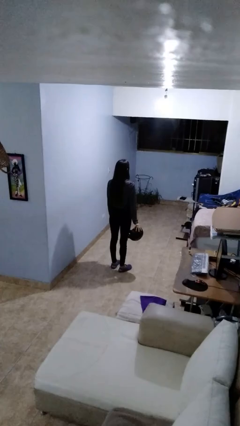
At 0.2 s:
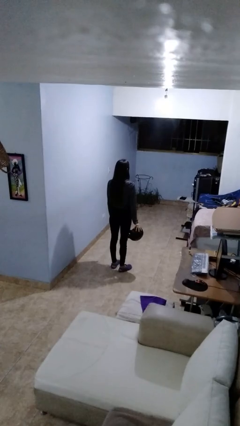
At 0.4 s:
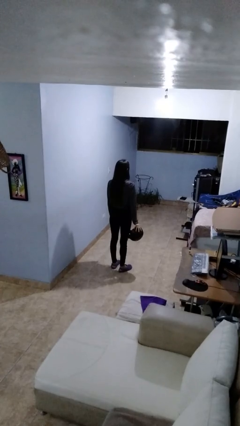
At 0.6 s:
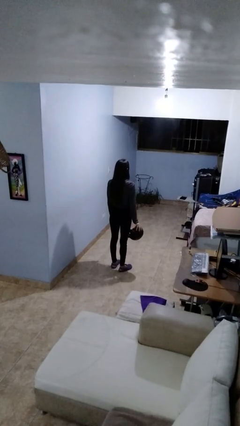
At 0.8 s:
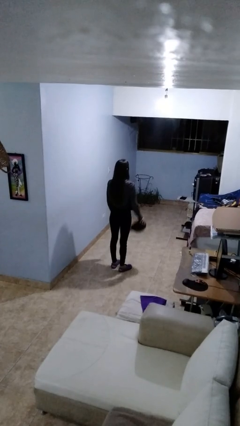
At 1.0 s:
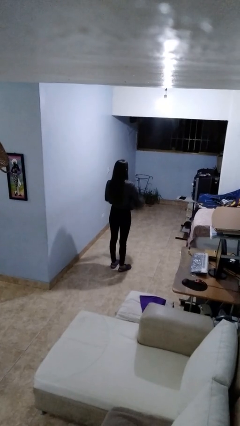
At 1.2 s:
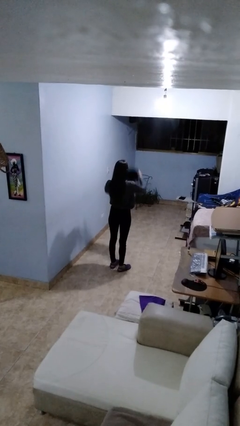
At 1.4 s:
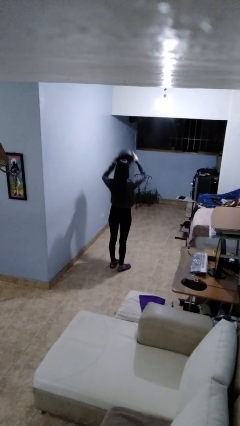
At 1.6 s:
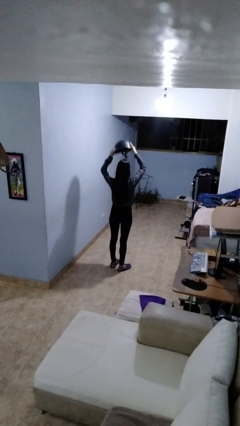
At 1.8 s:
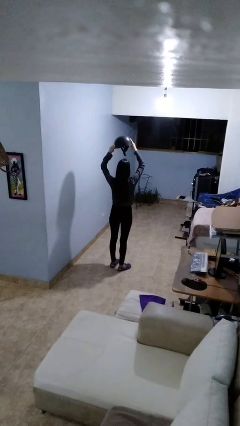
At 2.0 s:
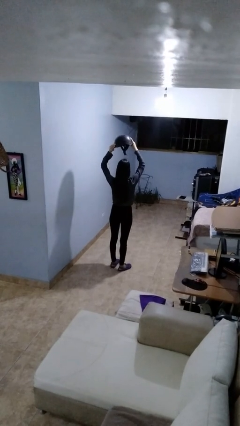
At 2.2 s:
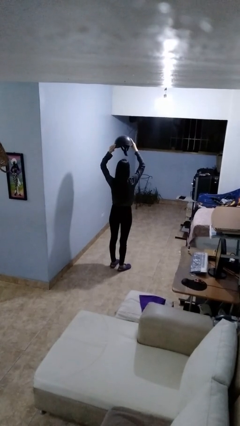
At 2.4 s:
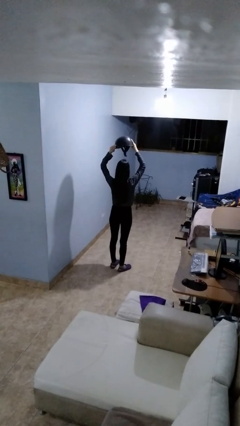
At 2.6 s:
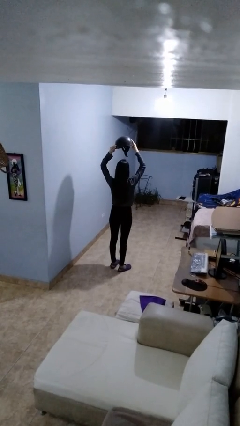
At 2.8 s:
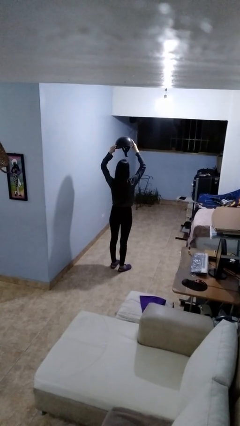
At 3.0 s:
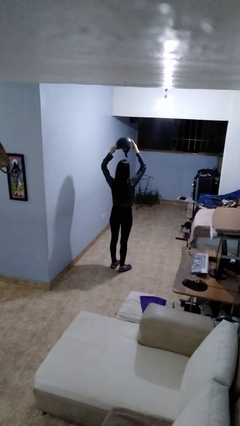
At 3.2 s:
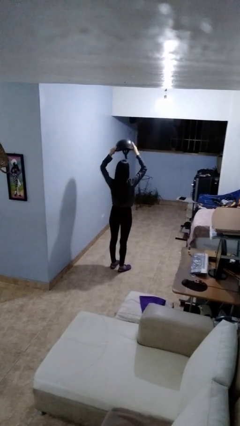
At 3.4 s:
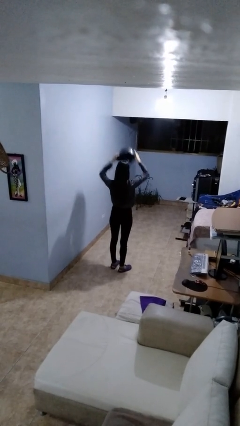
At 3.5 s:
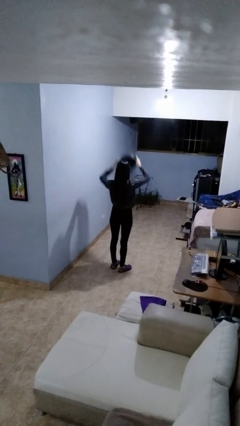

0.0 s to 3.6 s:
person holds object above head

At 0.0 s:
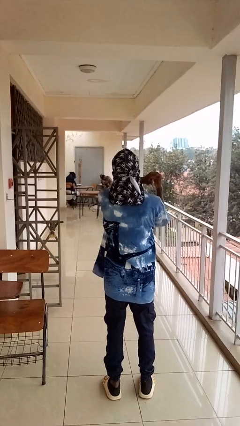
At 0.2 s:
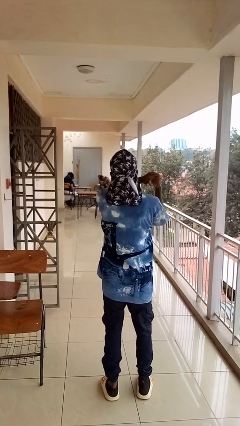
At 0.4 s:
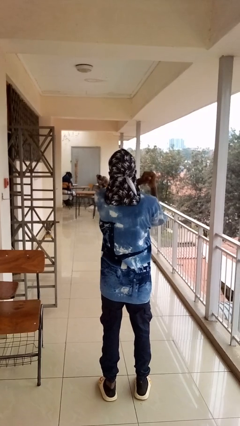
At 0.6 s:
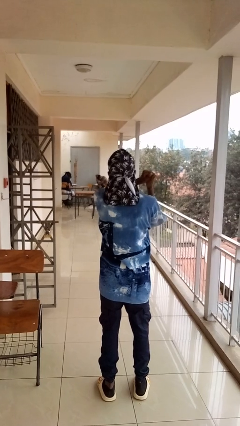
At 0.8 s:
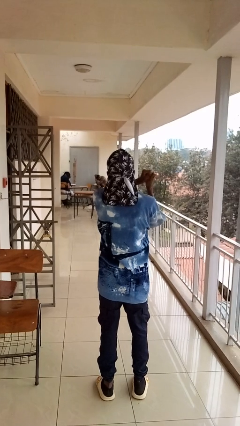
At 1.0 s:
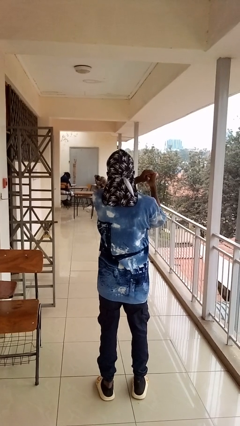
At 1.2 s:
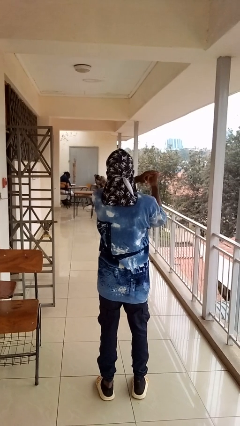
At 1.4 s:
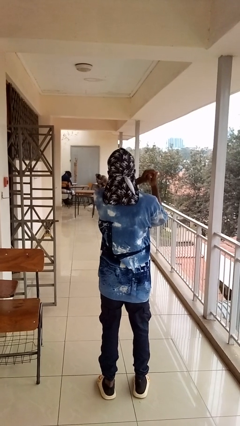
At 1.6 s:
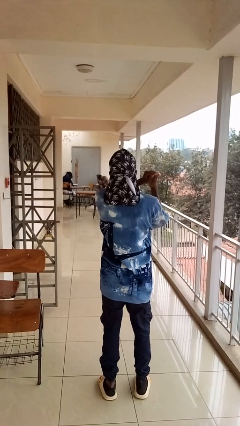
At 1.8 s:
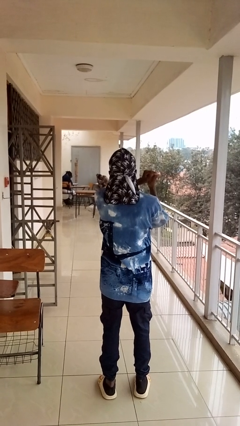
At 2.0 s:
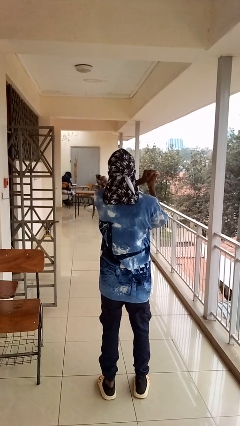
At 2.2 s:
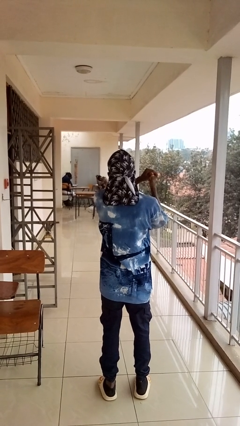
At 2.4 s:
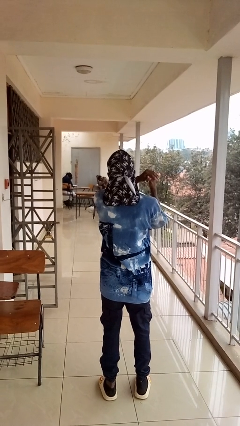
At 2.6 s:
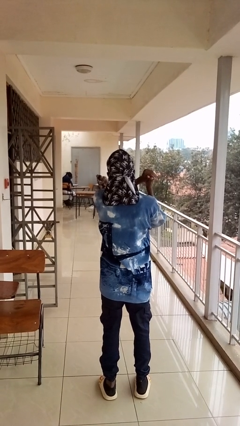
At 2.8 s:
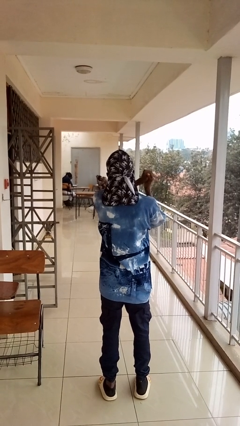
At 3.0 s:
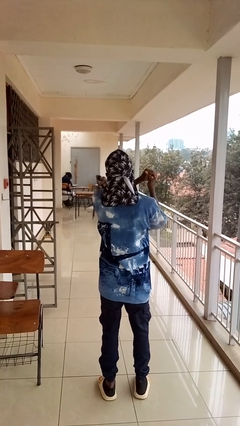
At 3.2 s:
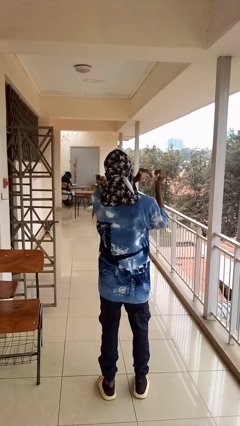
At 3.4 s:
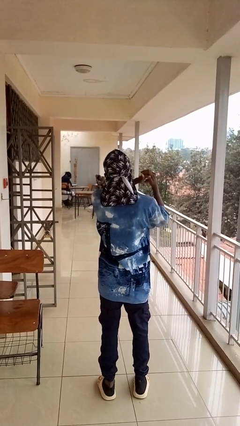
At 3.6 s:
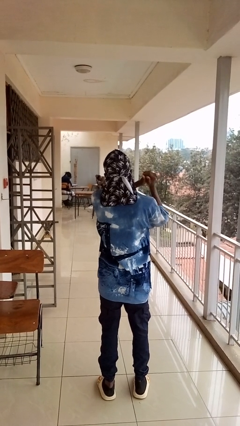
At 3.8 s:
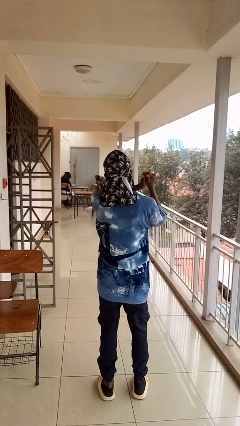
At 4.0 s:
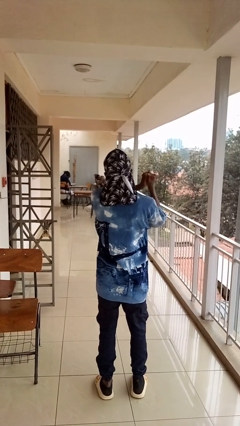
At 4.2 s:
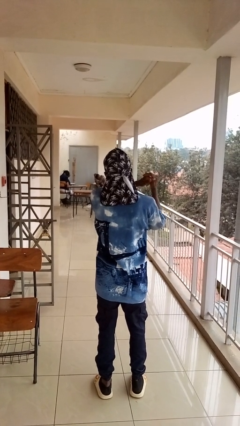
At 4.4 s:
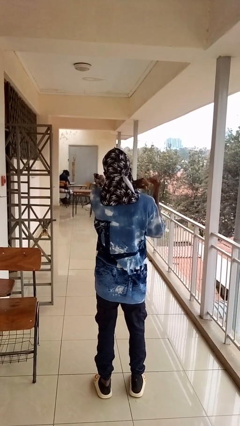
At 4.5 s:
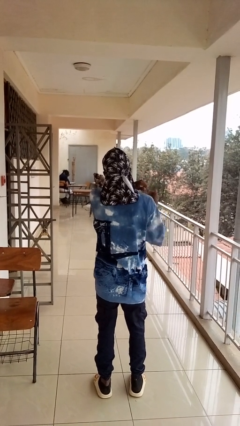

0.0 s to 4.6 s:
person cracks knuckles

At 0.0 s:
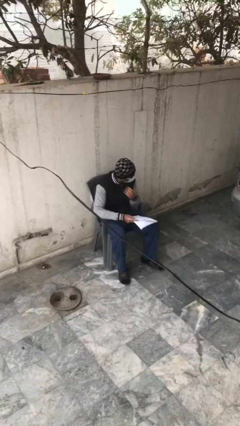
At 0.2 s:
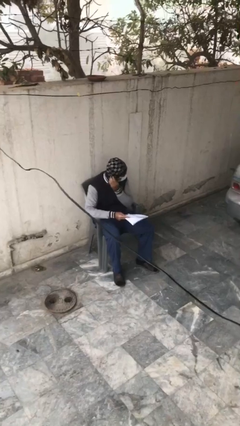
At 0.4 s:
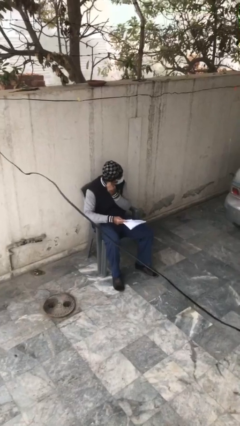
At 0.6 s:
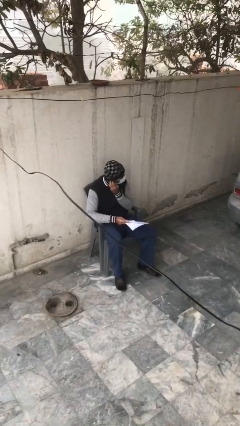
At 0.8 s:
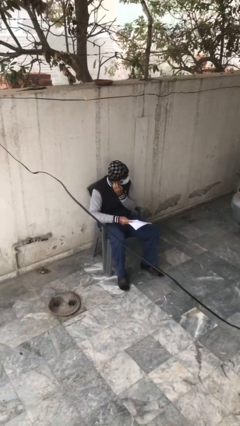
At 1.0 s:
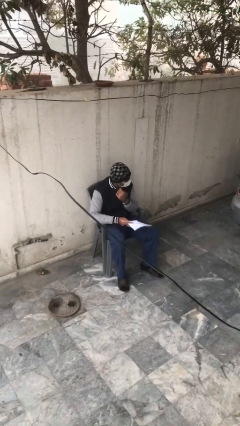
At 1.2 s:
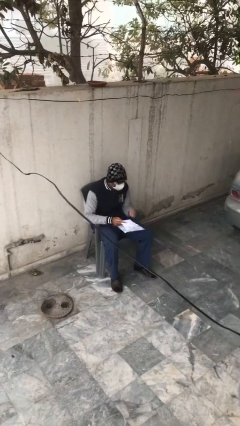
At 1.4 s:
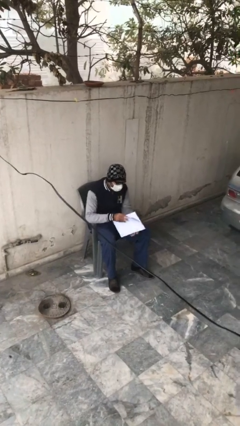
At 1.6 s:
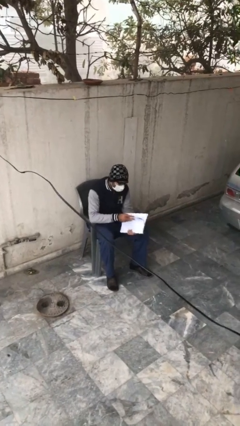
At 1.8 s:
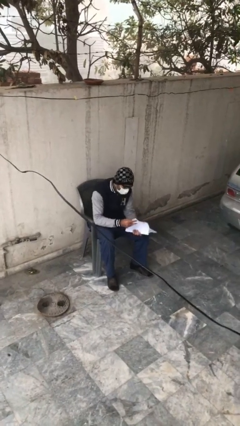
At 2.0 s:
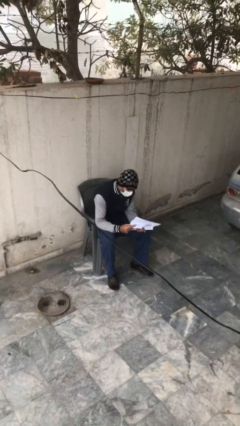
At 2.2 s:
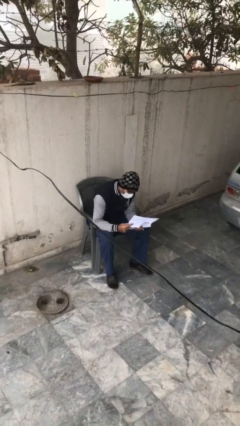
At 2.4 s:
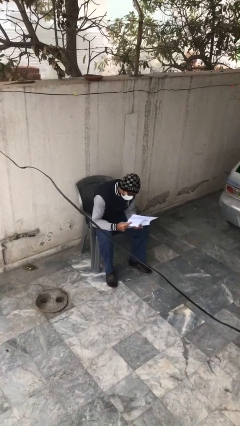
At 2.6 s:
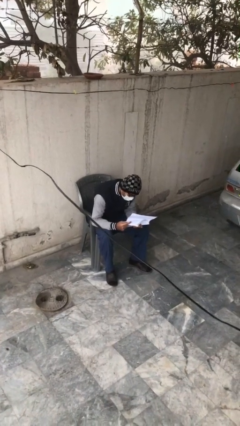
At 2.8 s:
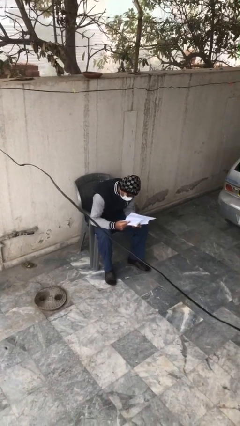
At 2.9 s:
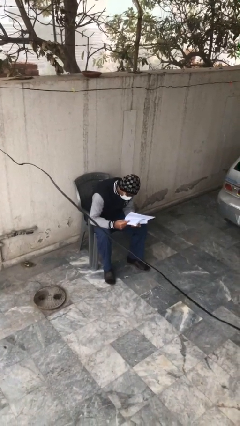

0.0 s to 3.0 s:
person reads document

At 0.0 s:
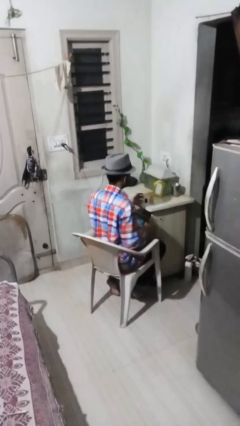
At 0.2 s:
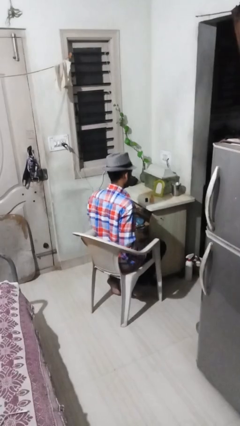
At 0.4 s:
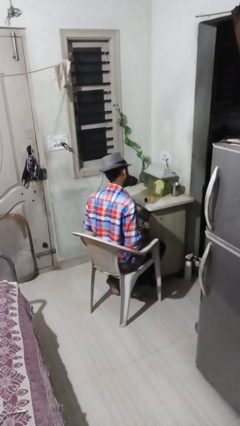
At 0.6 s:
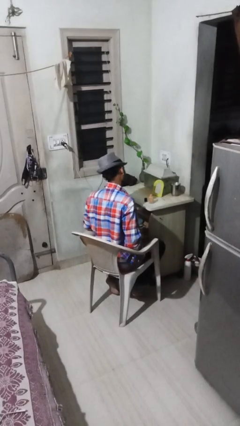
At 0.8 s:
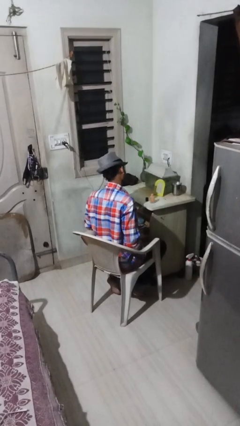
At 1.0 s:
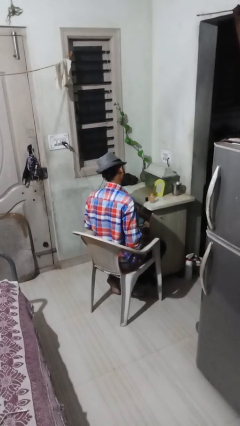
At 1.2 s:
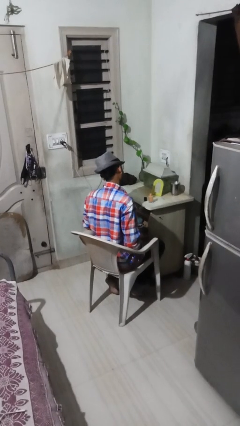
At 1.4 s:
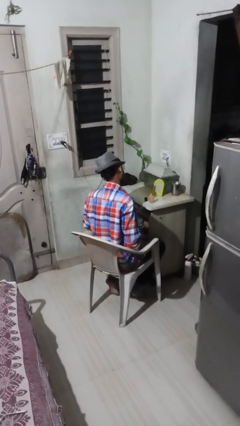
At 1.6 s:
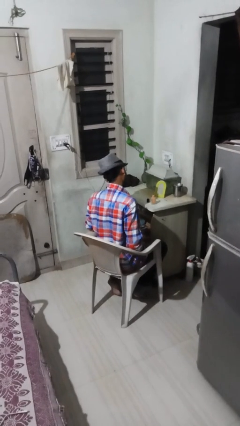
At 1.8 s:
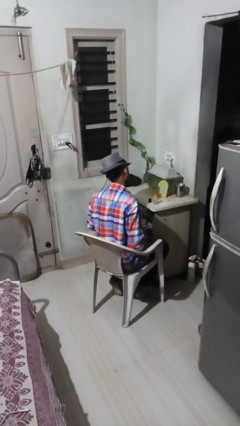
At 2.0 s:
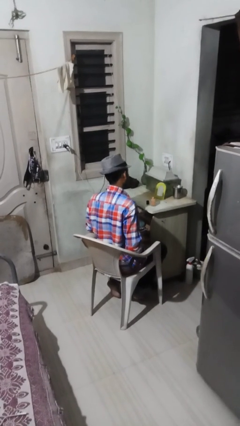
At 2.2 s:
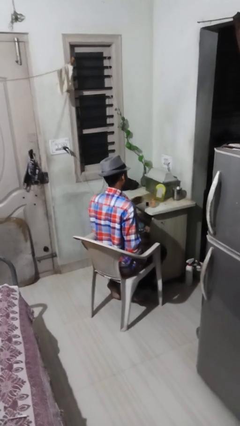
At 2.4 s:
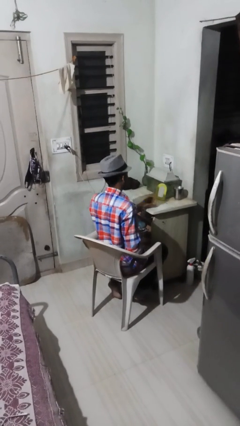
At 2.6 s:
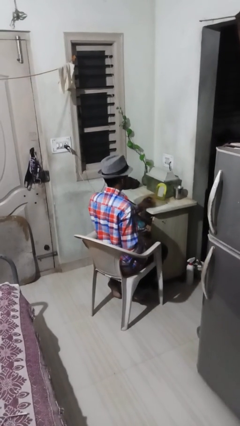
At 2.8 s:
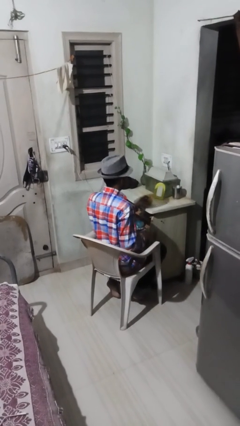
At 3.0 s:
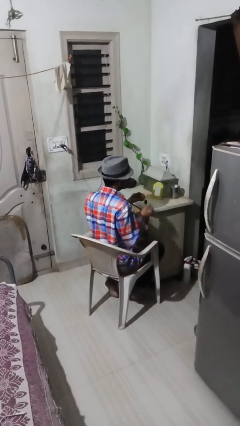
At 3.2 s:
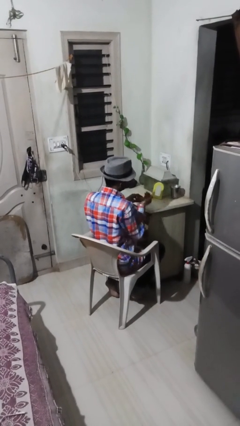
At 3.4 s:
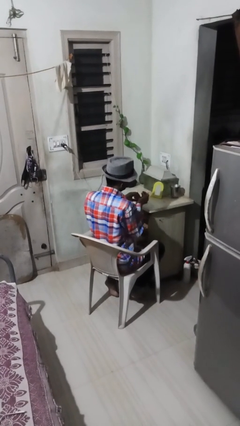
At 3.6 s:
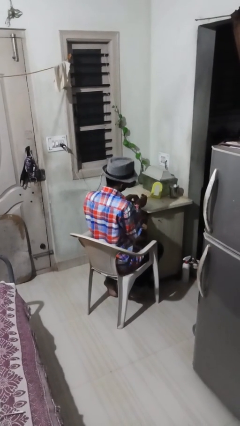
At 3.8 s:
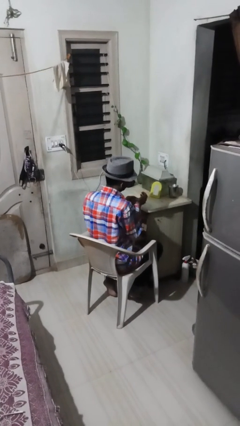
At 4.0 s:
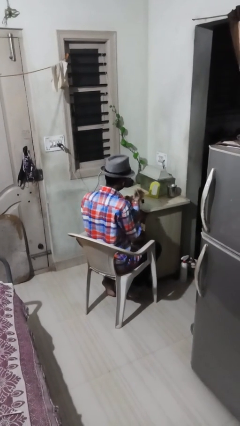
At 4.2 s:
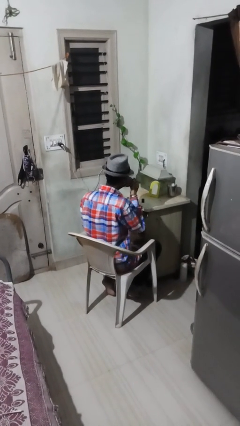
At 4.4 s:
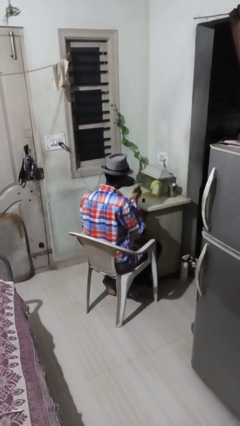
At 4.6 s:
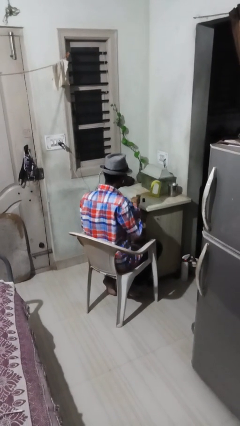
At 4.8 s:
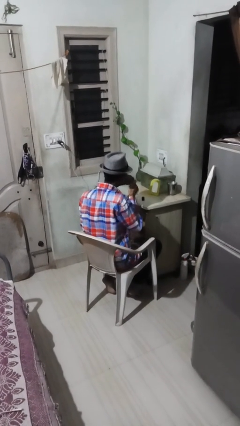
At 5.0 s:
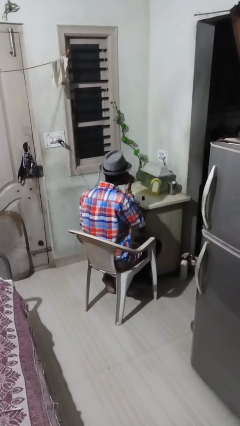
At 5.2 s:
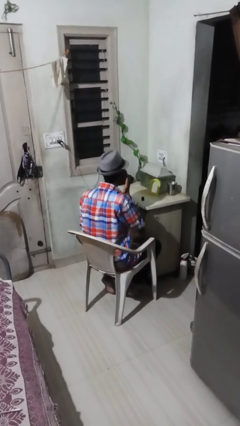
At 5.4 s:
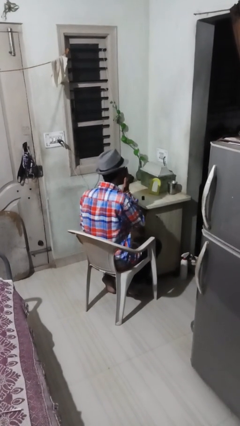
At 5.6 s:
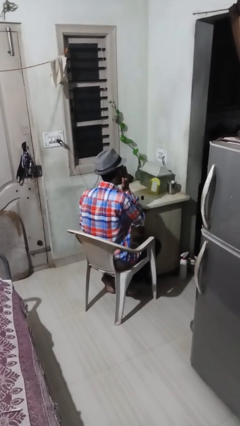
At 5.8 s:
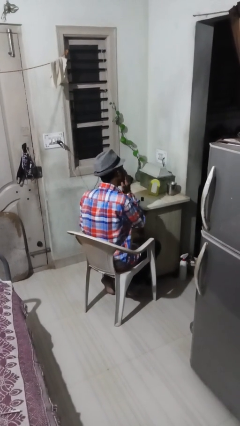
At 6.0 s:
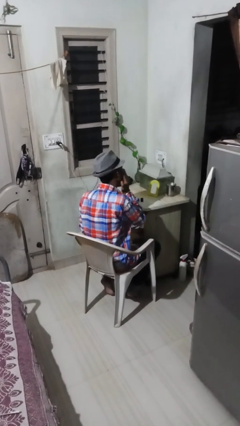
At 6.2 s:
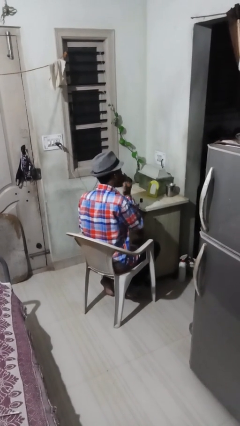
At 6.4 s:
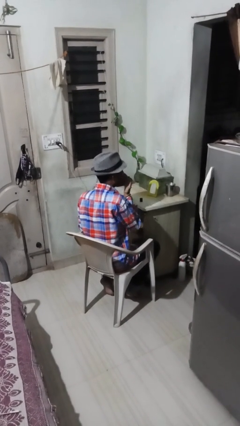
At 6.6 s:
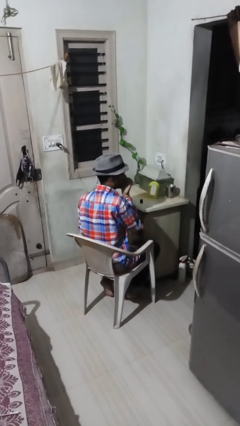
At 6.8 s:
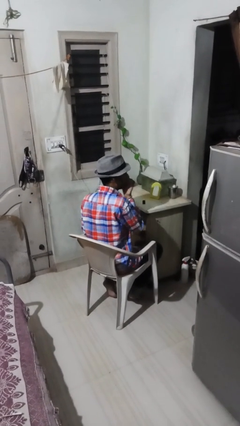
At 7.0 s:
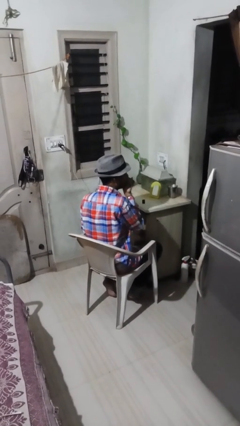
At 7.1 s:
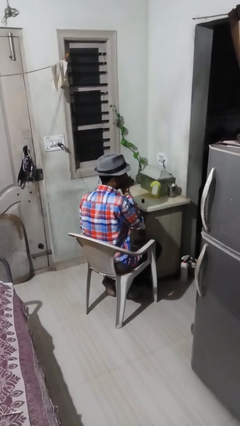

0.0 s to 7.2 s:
person applies foundation makeup
